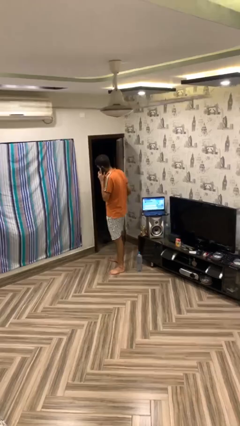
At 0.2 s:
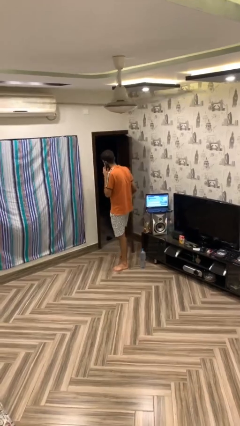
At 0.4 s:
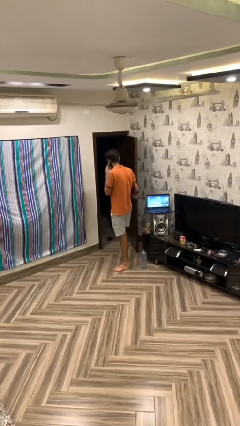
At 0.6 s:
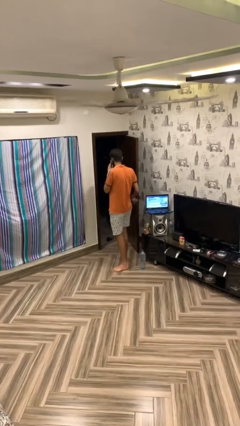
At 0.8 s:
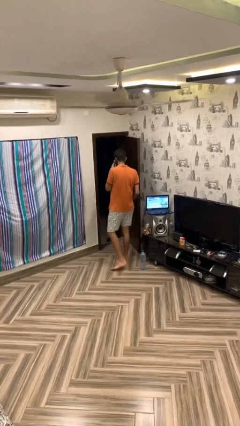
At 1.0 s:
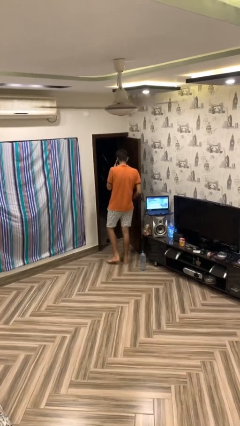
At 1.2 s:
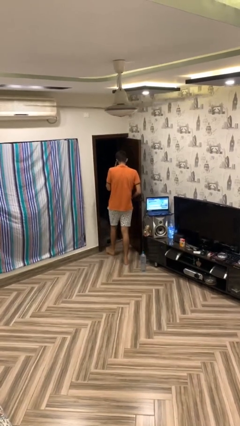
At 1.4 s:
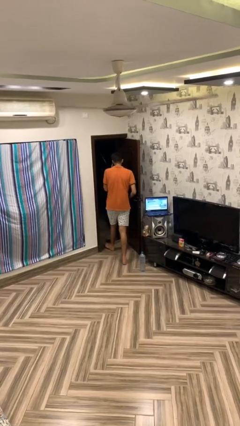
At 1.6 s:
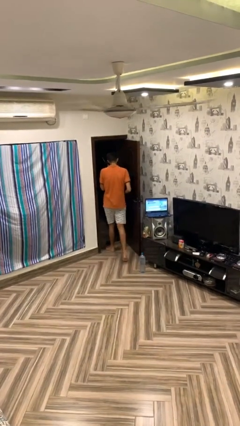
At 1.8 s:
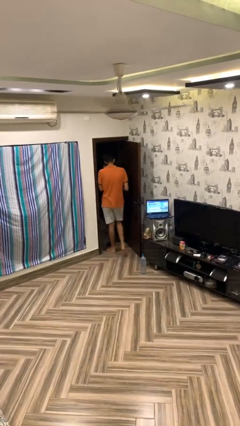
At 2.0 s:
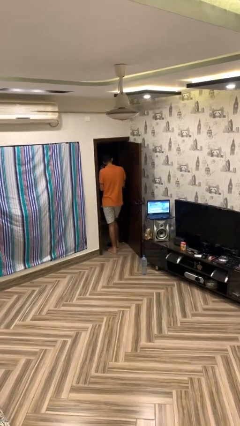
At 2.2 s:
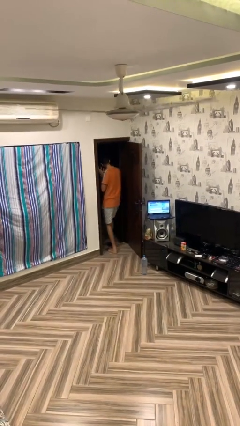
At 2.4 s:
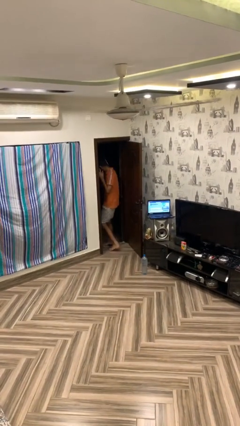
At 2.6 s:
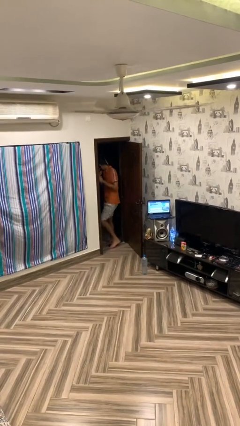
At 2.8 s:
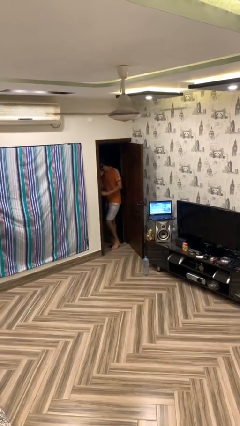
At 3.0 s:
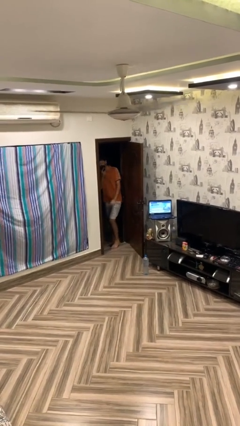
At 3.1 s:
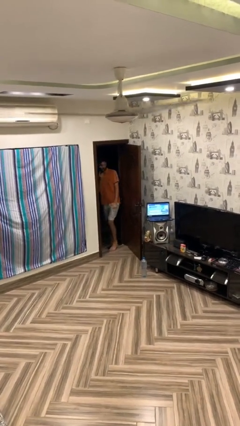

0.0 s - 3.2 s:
person exits scene through structure

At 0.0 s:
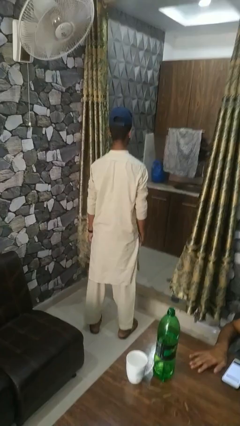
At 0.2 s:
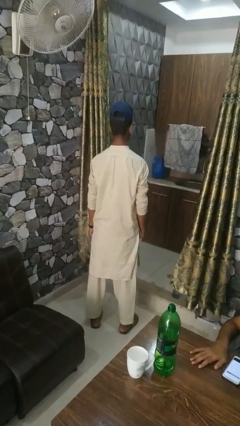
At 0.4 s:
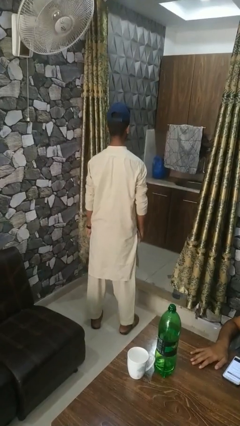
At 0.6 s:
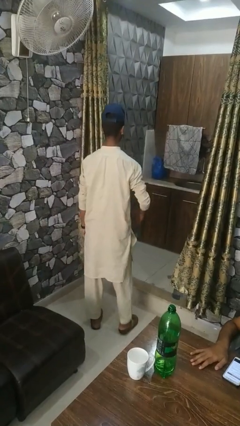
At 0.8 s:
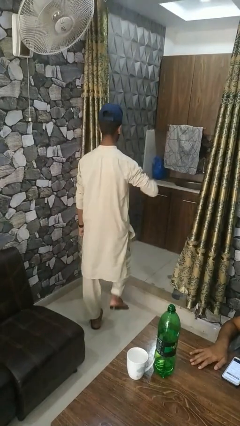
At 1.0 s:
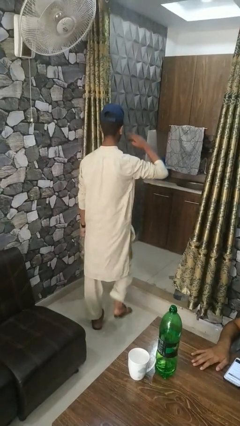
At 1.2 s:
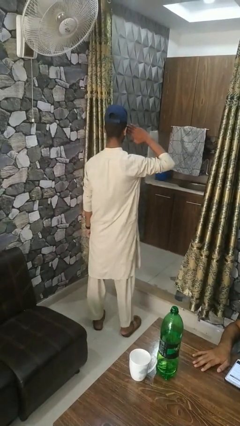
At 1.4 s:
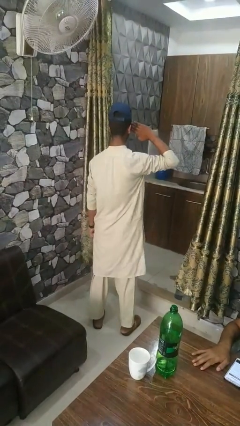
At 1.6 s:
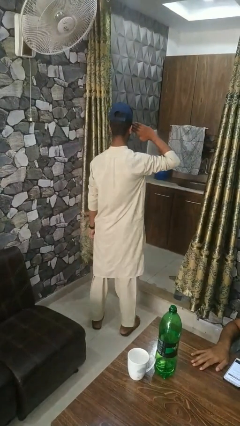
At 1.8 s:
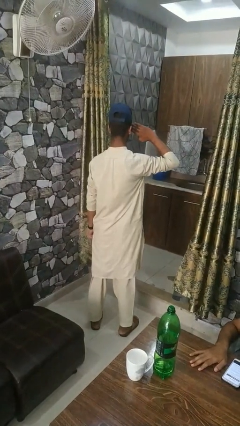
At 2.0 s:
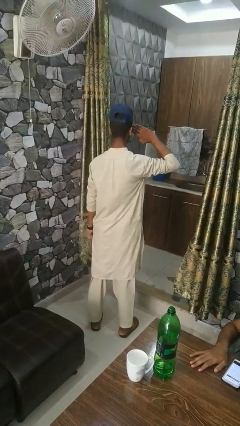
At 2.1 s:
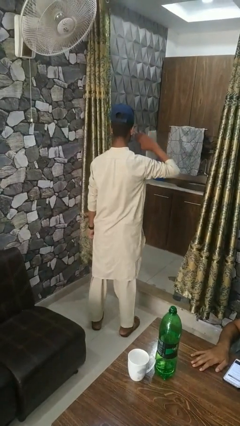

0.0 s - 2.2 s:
person salutes

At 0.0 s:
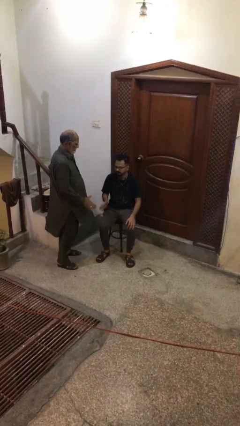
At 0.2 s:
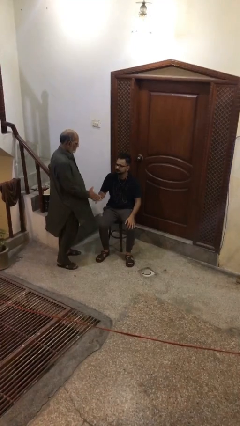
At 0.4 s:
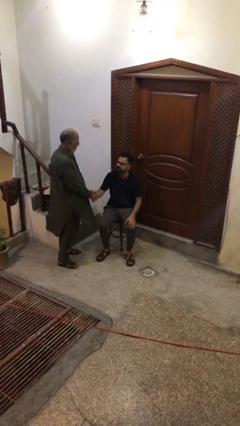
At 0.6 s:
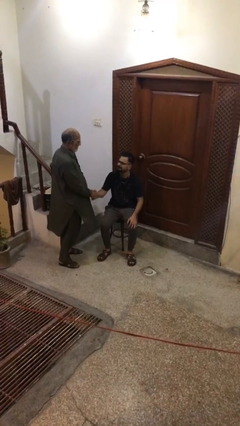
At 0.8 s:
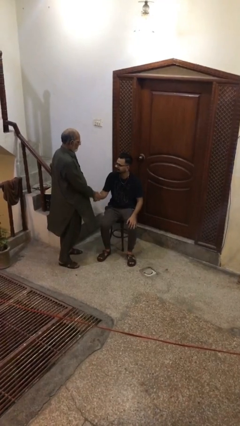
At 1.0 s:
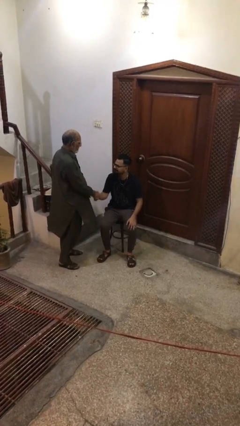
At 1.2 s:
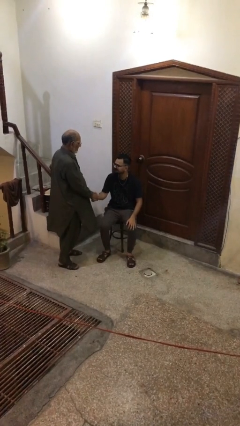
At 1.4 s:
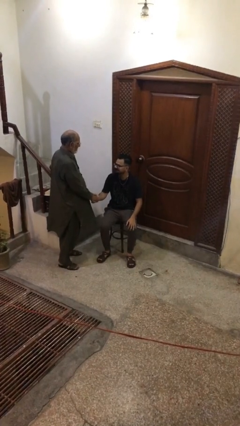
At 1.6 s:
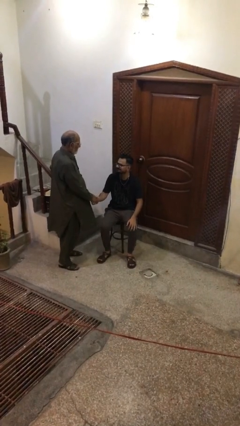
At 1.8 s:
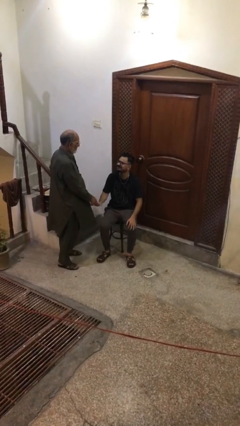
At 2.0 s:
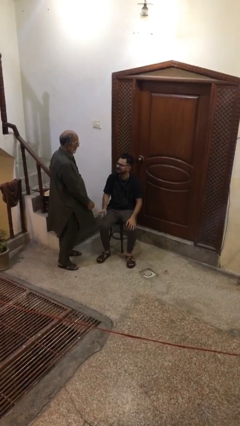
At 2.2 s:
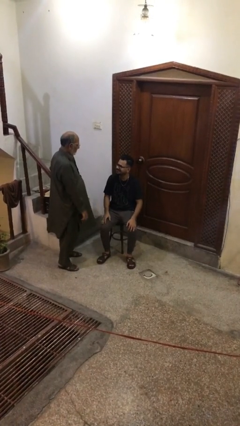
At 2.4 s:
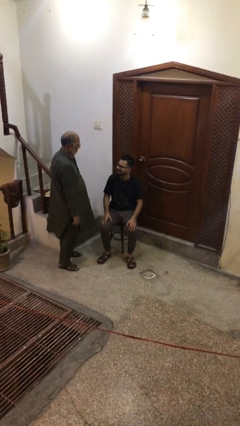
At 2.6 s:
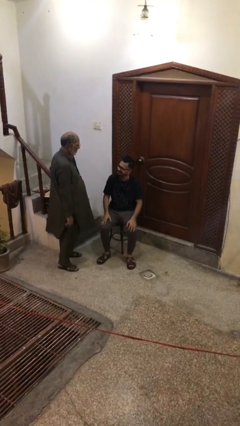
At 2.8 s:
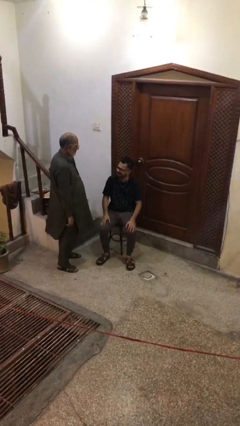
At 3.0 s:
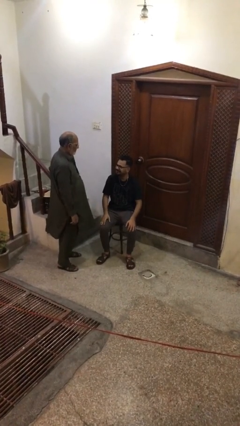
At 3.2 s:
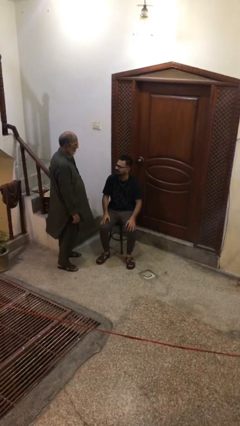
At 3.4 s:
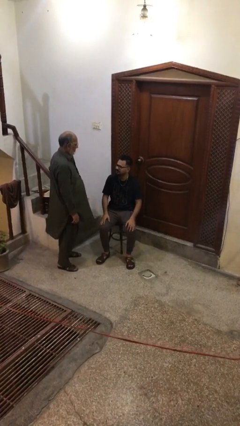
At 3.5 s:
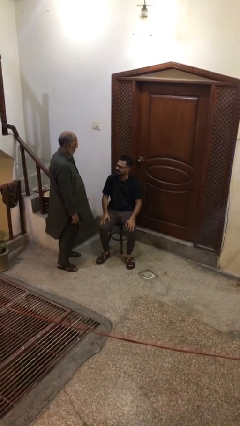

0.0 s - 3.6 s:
person shakes hand

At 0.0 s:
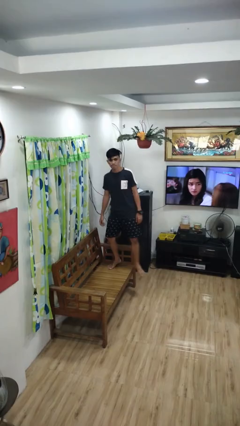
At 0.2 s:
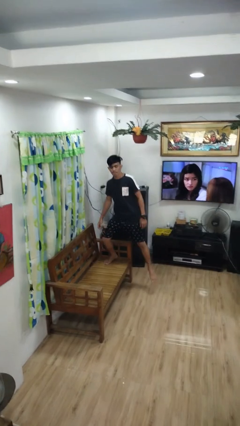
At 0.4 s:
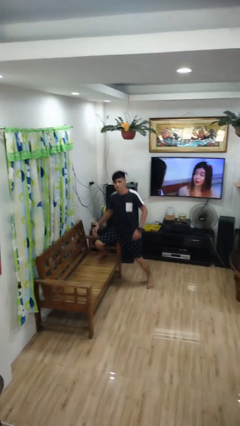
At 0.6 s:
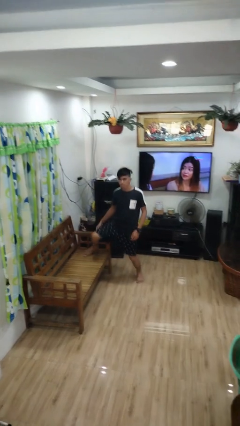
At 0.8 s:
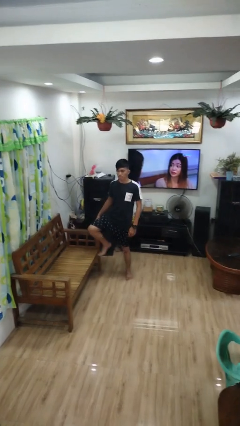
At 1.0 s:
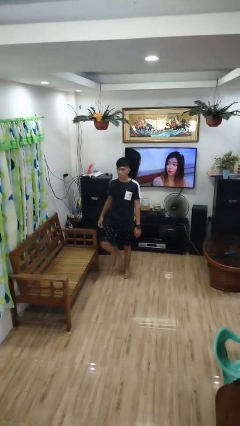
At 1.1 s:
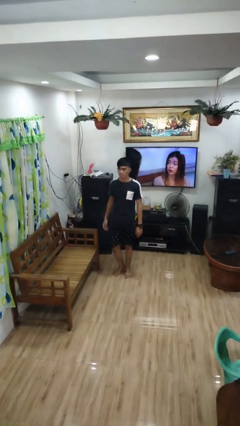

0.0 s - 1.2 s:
person climbs off couch

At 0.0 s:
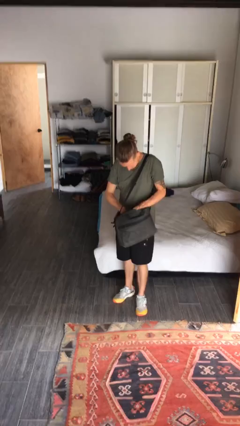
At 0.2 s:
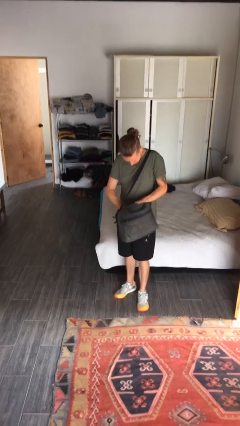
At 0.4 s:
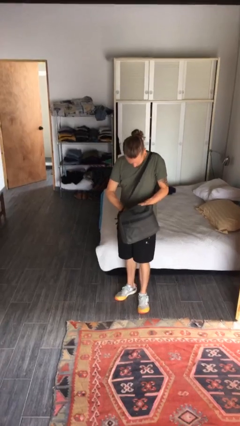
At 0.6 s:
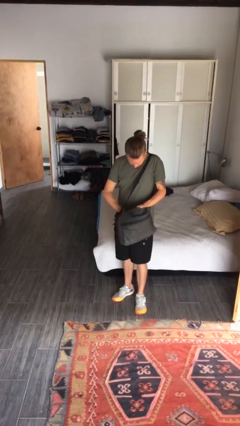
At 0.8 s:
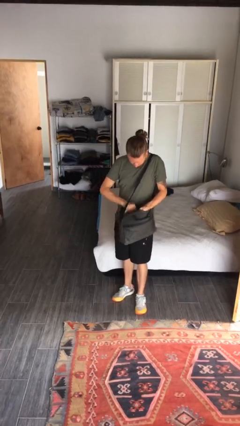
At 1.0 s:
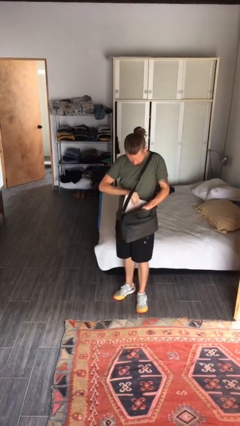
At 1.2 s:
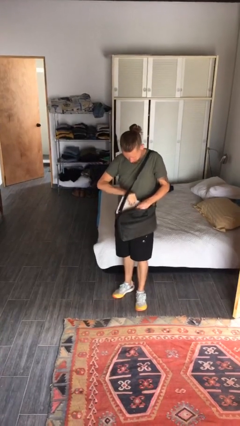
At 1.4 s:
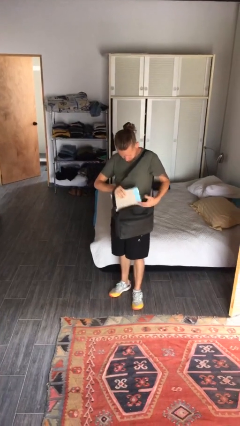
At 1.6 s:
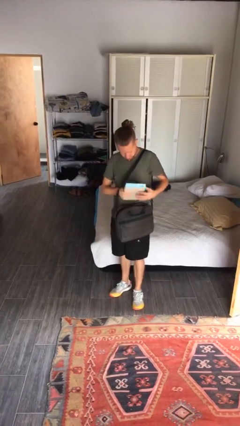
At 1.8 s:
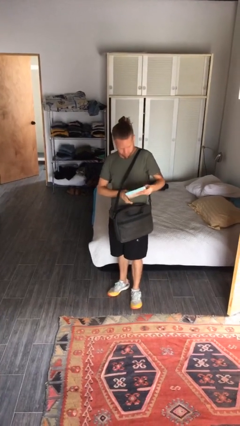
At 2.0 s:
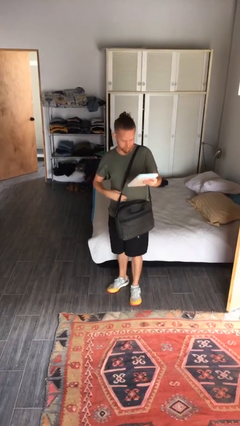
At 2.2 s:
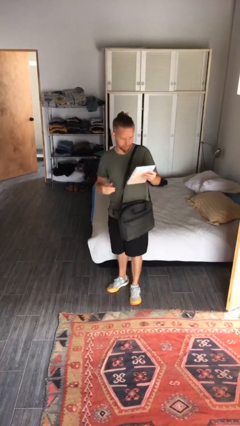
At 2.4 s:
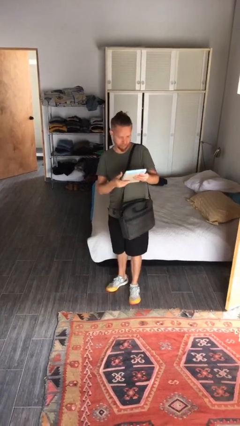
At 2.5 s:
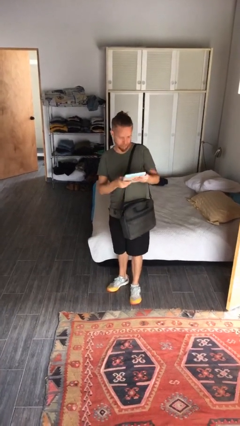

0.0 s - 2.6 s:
person takes object from purse

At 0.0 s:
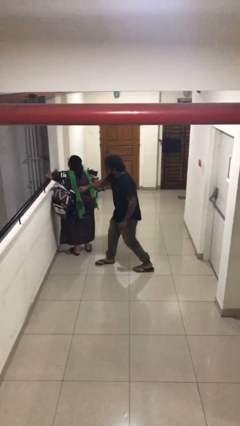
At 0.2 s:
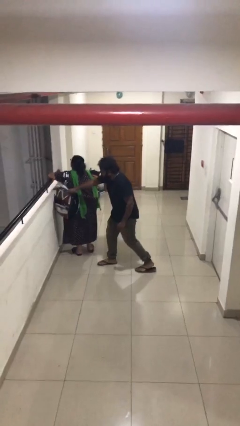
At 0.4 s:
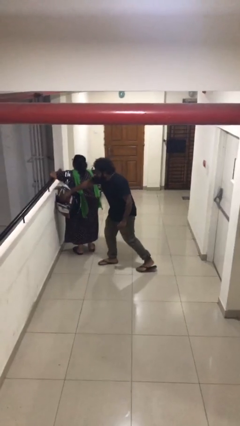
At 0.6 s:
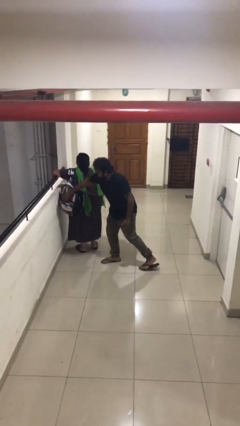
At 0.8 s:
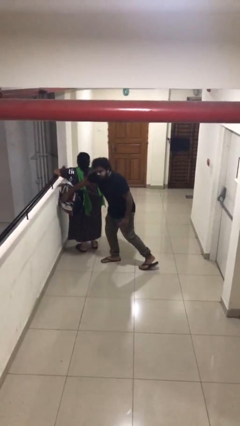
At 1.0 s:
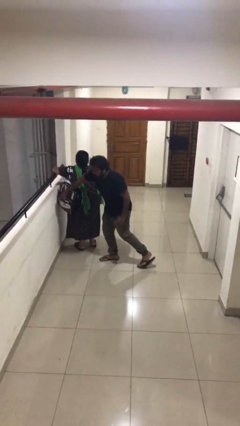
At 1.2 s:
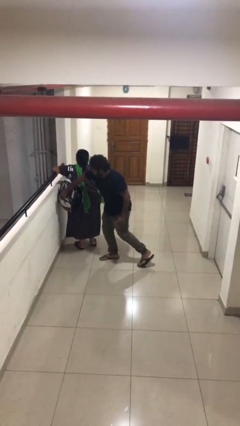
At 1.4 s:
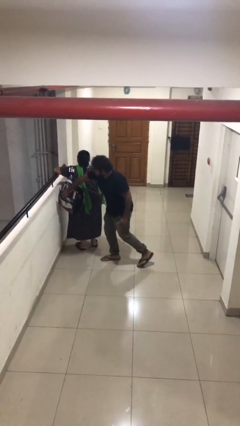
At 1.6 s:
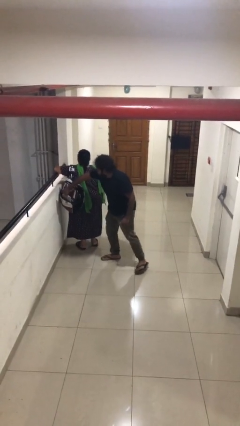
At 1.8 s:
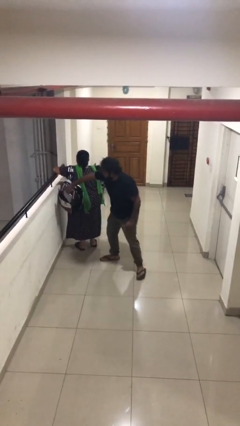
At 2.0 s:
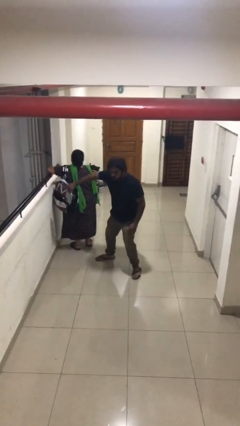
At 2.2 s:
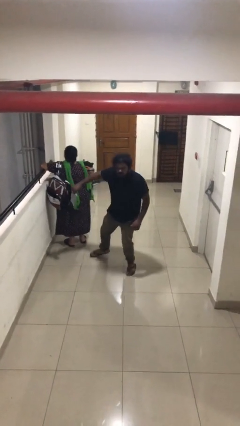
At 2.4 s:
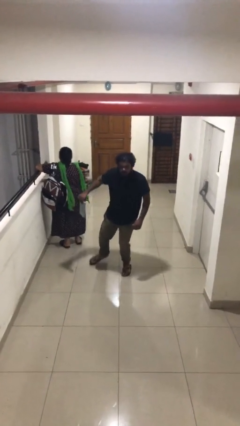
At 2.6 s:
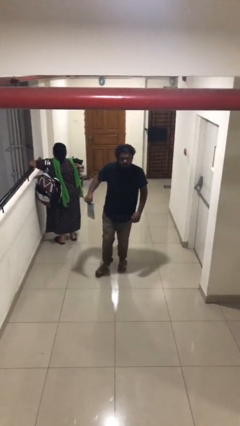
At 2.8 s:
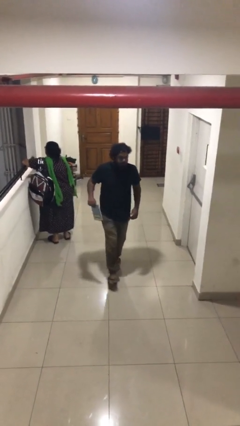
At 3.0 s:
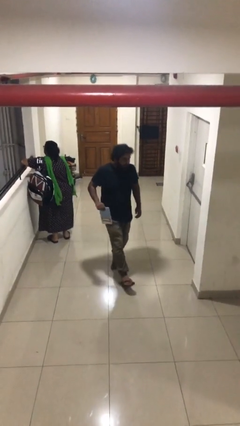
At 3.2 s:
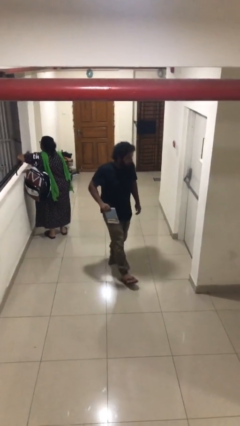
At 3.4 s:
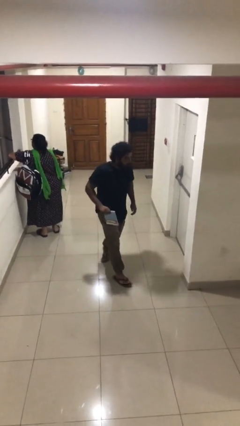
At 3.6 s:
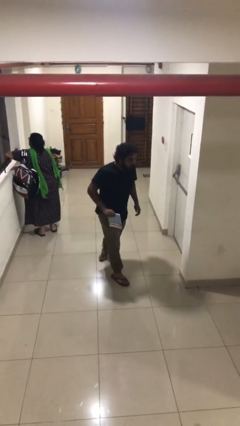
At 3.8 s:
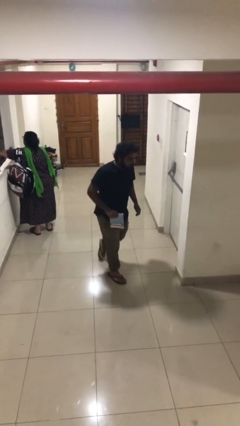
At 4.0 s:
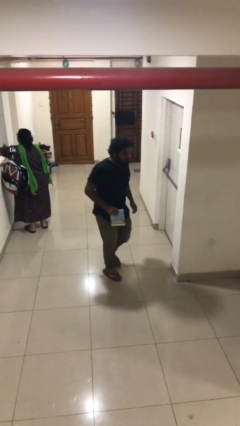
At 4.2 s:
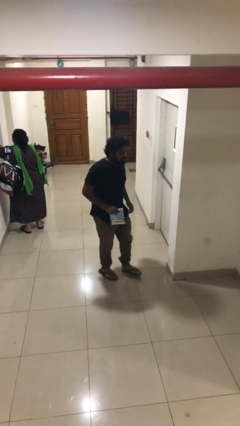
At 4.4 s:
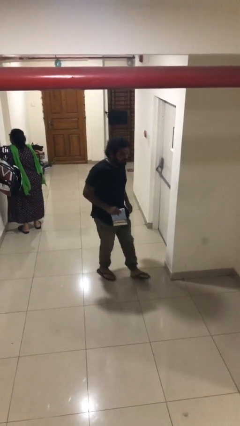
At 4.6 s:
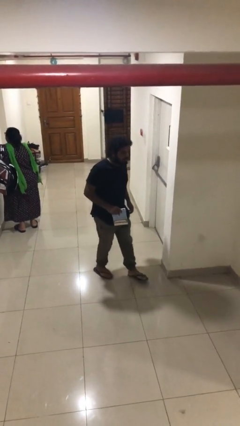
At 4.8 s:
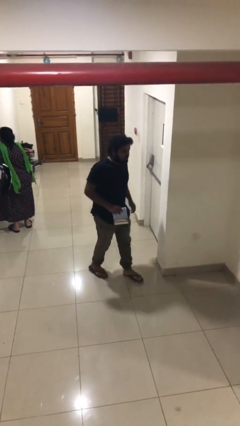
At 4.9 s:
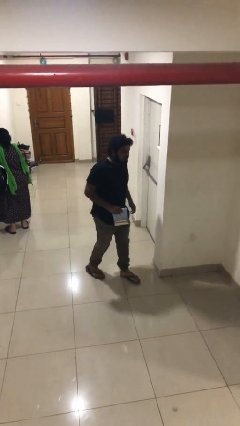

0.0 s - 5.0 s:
person steals object from person
